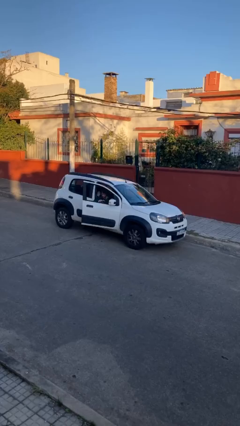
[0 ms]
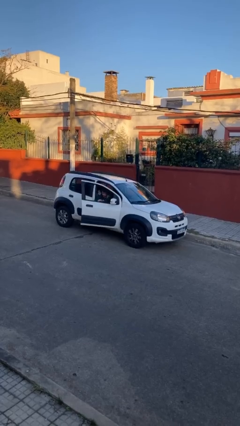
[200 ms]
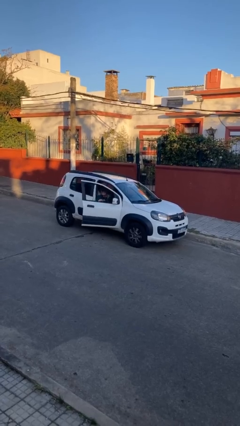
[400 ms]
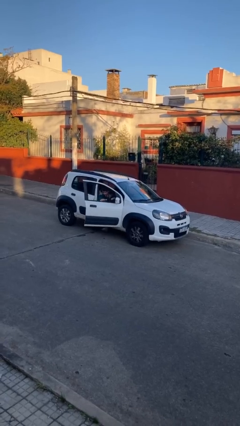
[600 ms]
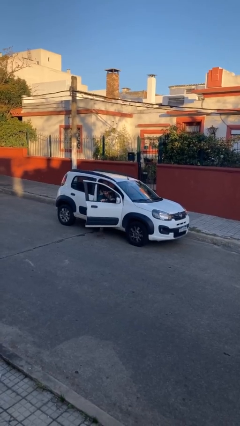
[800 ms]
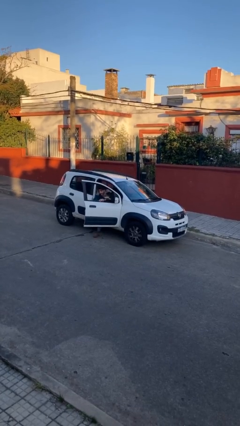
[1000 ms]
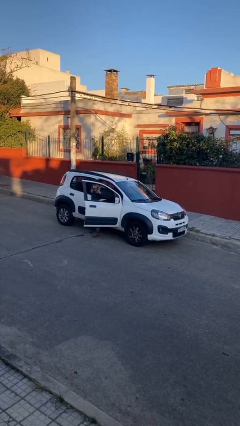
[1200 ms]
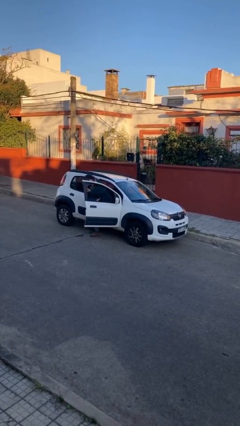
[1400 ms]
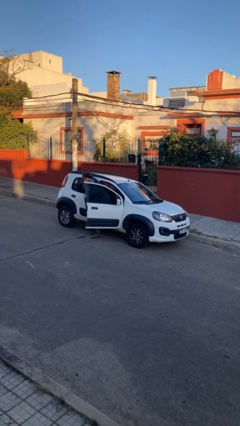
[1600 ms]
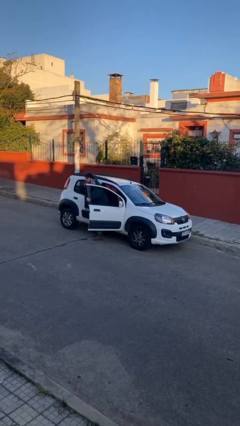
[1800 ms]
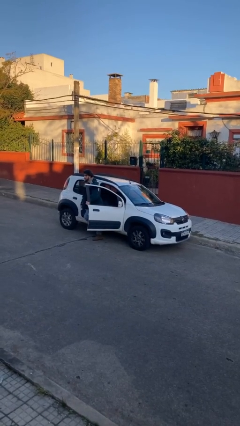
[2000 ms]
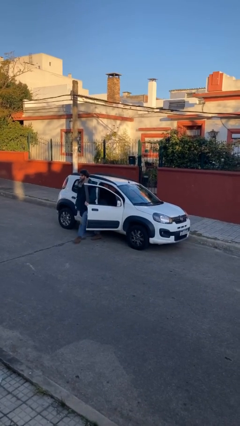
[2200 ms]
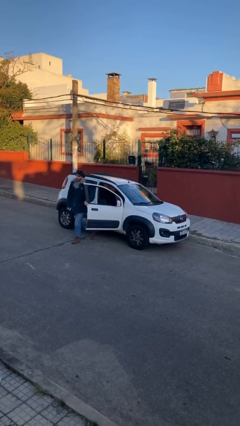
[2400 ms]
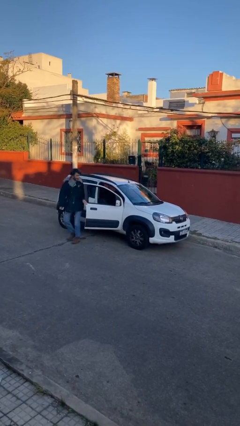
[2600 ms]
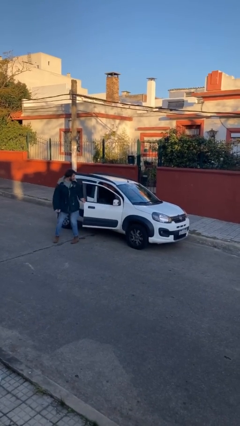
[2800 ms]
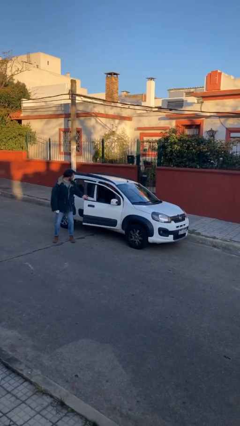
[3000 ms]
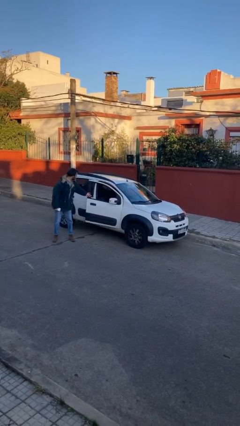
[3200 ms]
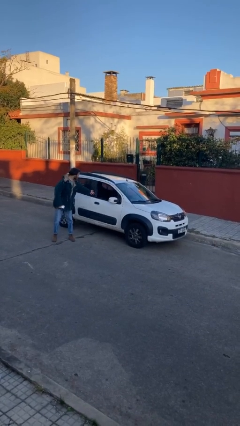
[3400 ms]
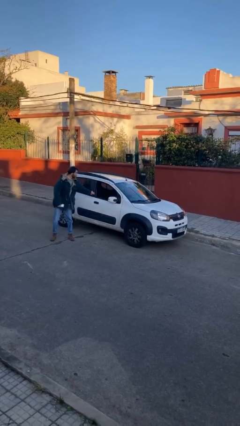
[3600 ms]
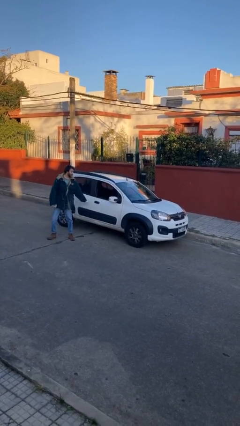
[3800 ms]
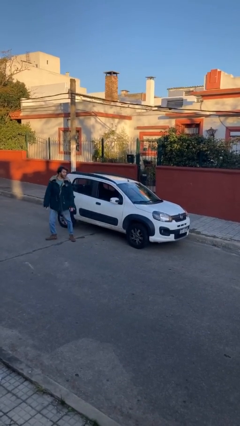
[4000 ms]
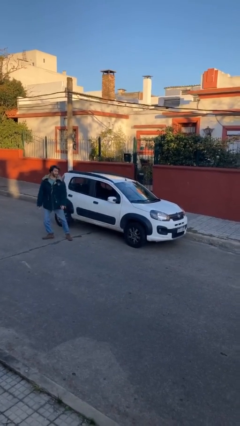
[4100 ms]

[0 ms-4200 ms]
car drops off person

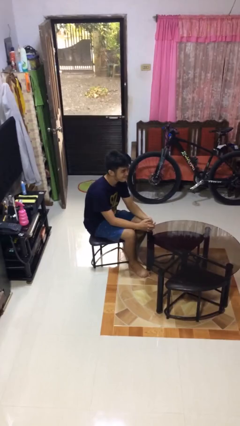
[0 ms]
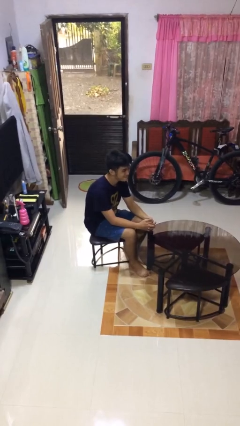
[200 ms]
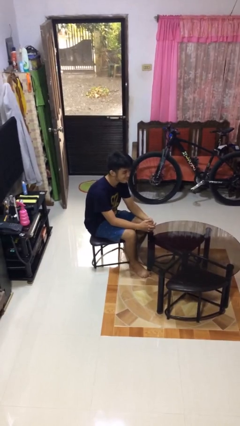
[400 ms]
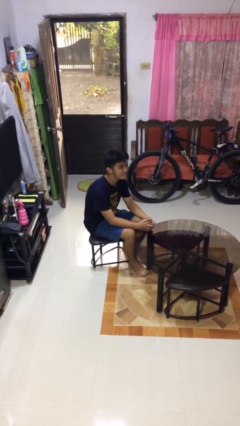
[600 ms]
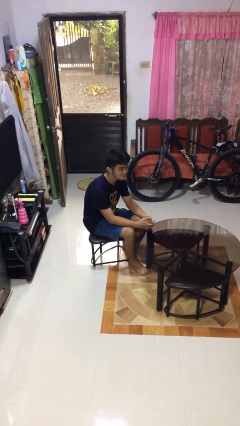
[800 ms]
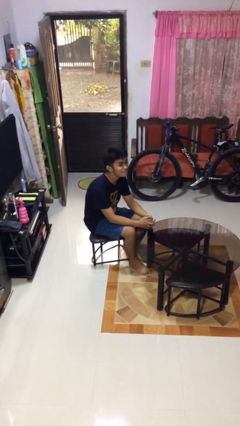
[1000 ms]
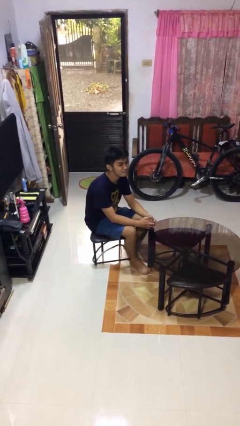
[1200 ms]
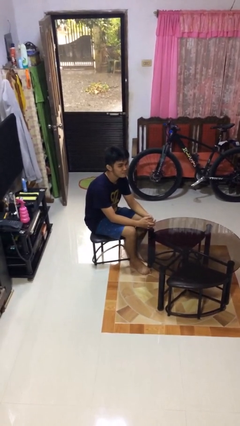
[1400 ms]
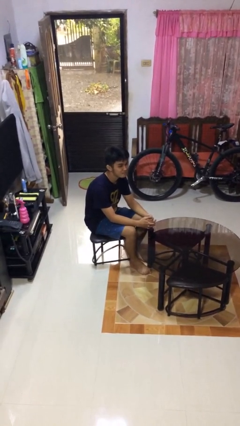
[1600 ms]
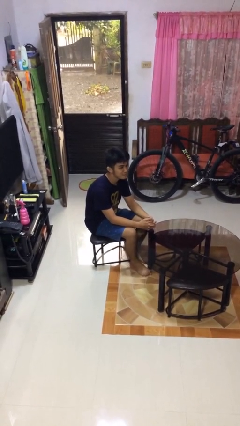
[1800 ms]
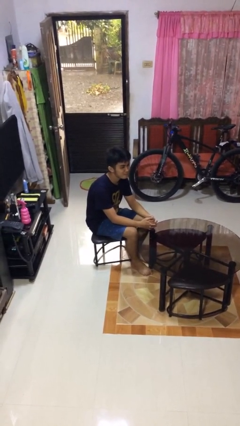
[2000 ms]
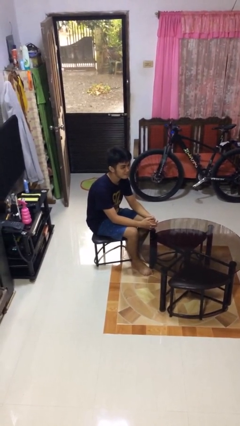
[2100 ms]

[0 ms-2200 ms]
person nods head

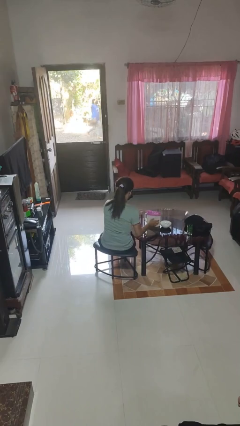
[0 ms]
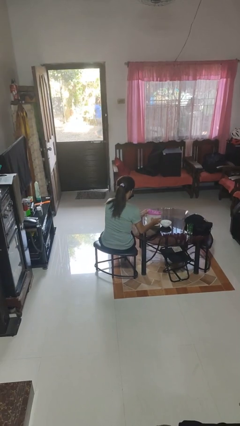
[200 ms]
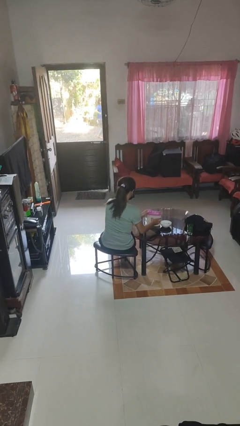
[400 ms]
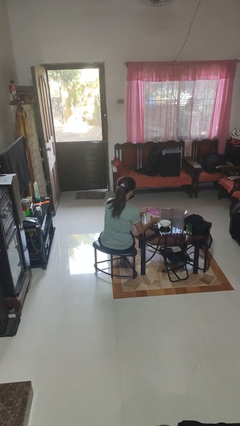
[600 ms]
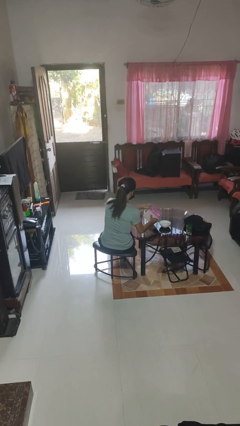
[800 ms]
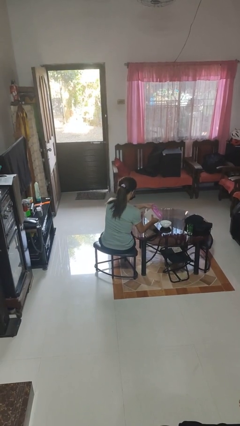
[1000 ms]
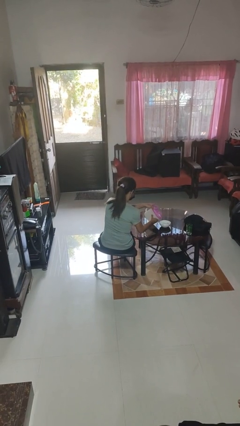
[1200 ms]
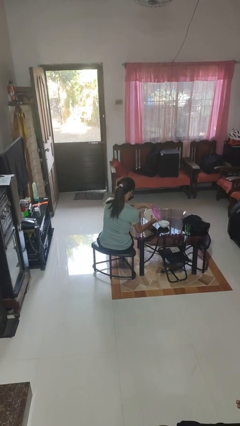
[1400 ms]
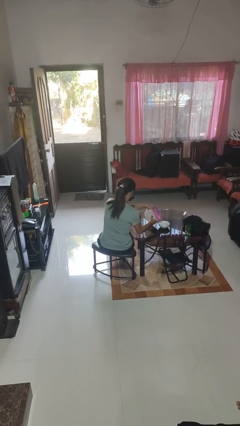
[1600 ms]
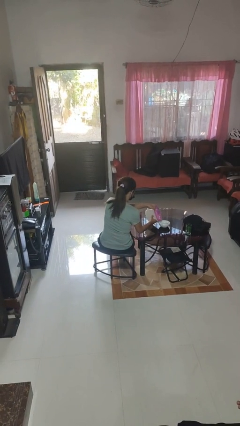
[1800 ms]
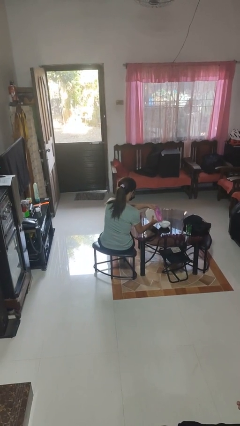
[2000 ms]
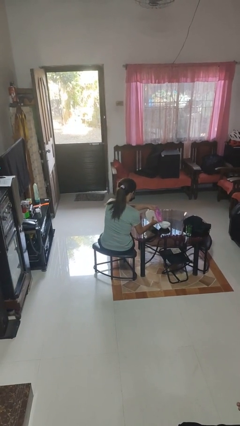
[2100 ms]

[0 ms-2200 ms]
person pours into bowl

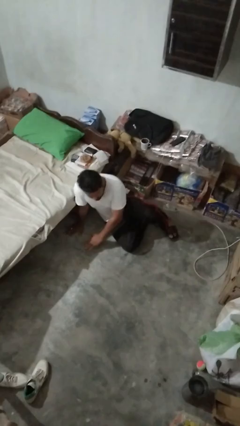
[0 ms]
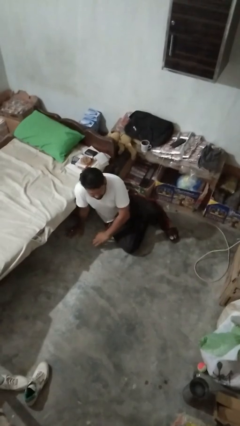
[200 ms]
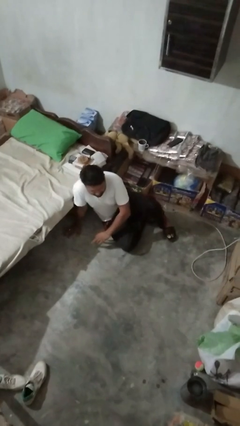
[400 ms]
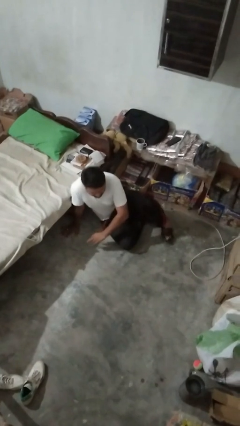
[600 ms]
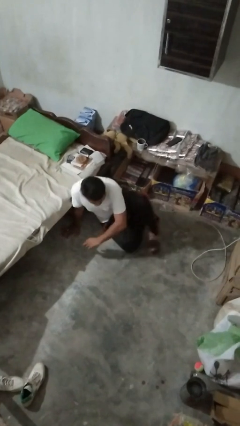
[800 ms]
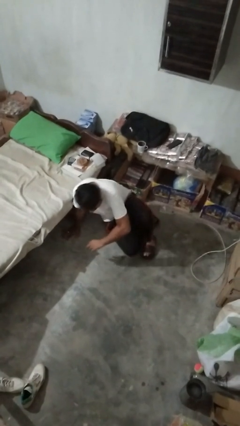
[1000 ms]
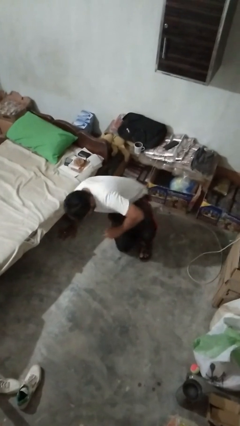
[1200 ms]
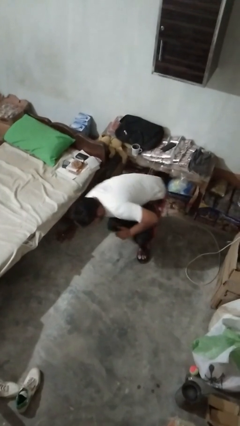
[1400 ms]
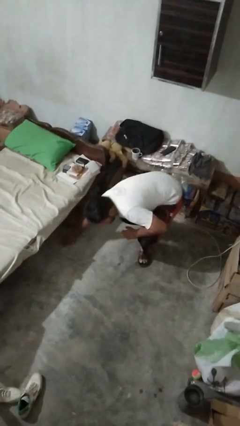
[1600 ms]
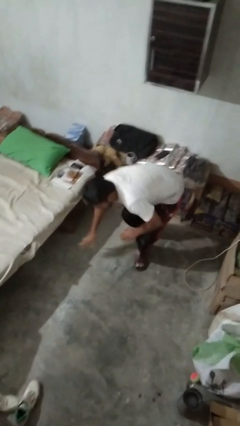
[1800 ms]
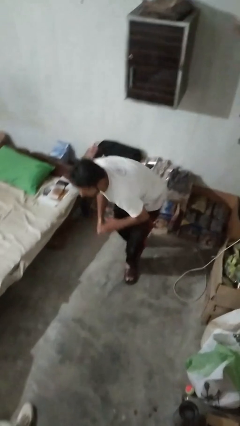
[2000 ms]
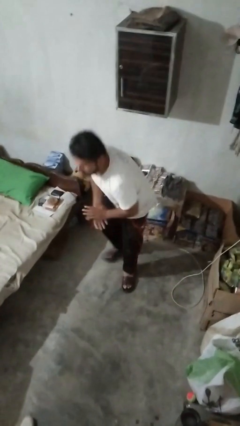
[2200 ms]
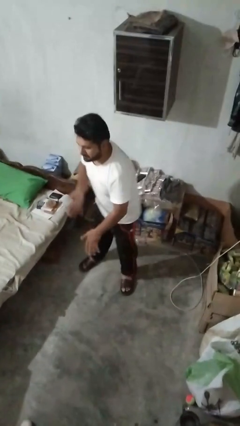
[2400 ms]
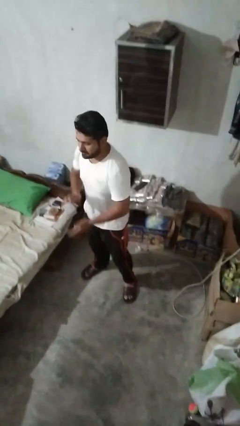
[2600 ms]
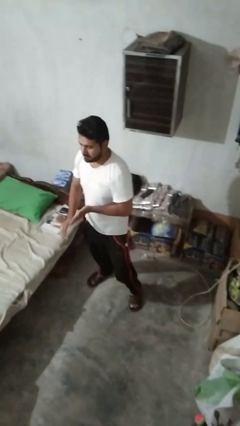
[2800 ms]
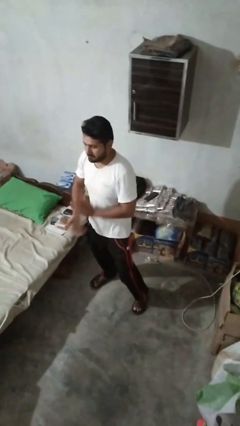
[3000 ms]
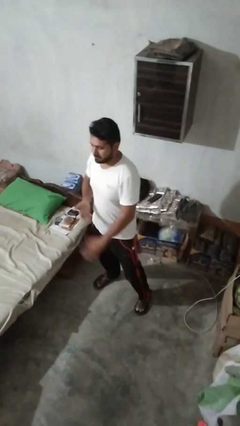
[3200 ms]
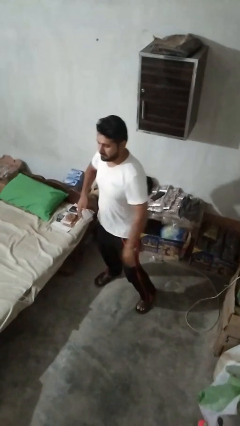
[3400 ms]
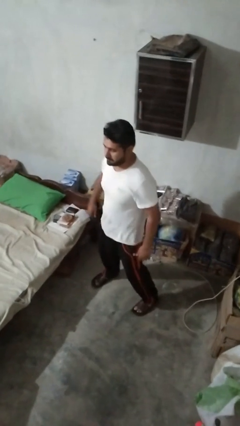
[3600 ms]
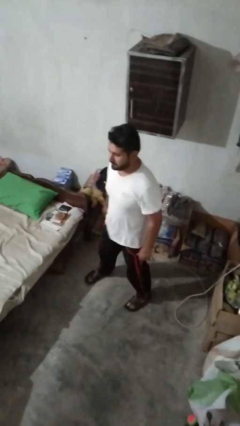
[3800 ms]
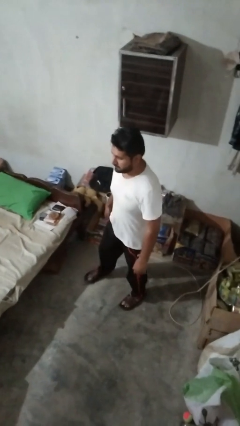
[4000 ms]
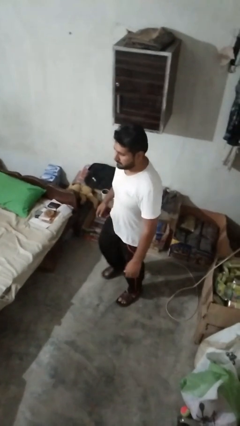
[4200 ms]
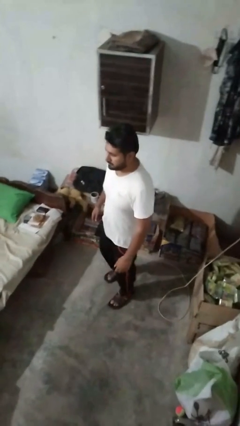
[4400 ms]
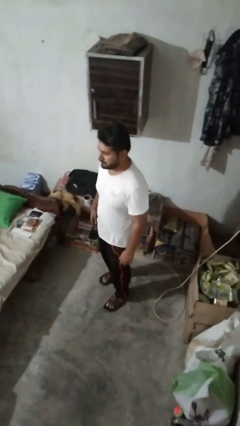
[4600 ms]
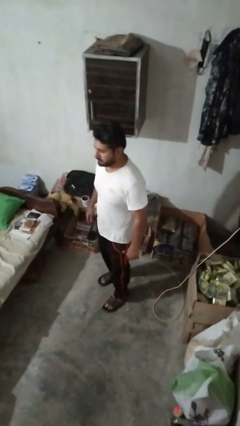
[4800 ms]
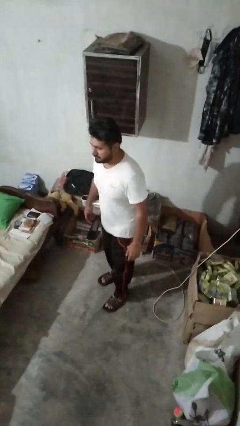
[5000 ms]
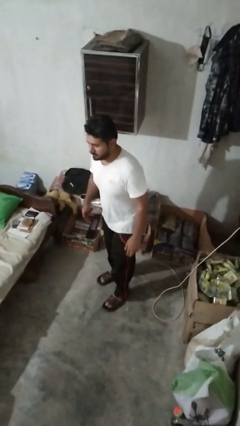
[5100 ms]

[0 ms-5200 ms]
person stands up from floor

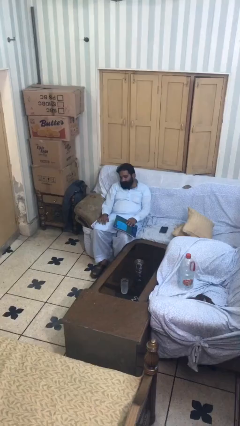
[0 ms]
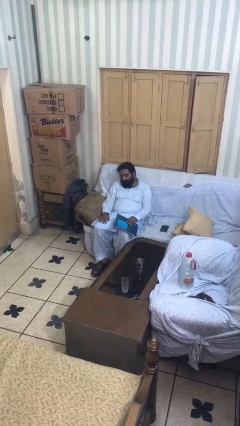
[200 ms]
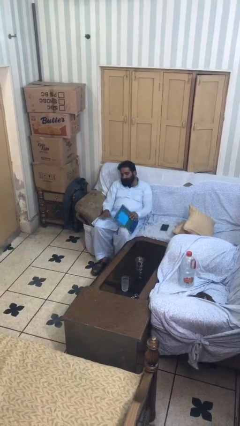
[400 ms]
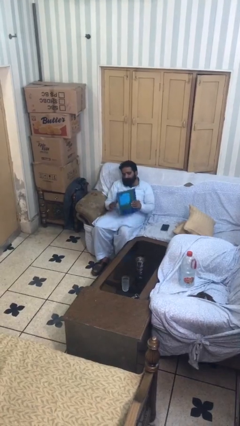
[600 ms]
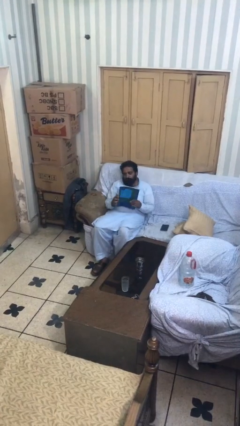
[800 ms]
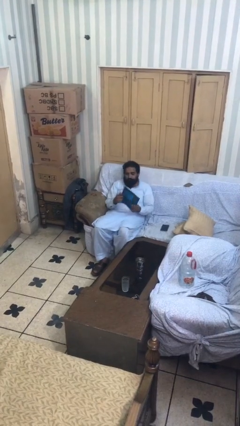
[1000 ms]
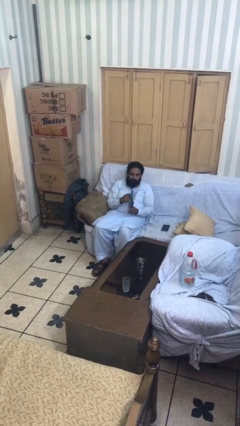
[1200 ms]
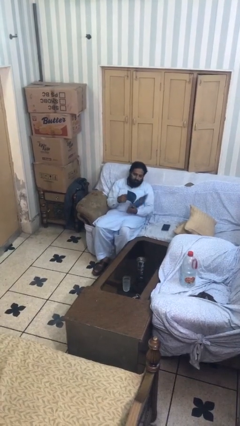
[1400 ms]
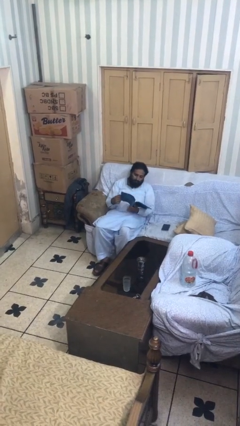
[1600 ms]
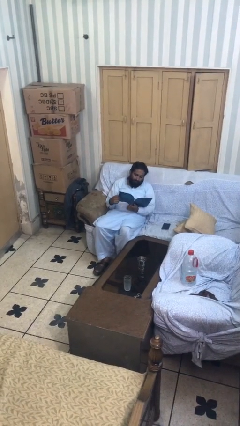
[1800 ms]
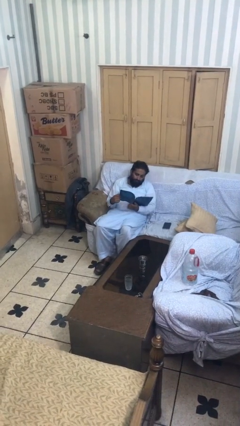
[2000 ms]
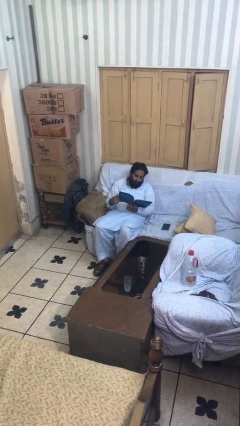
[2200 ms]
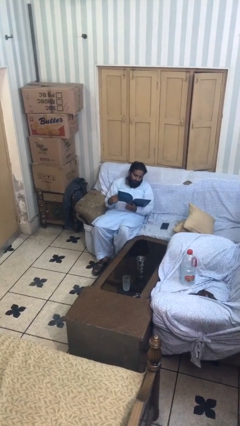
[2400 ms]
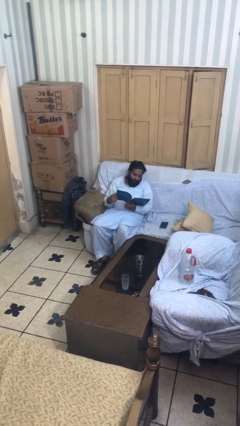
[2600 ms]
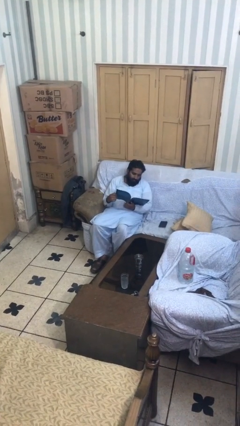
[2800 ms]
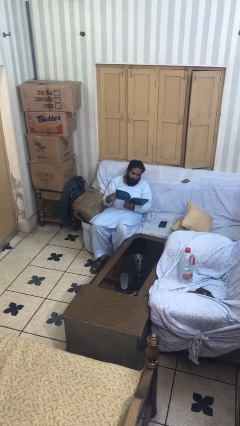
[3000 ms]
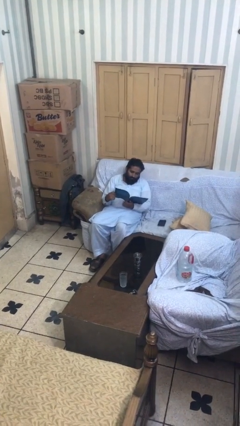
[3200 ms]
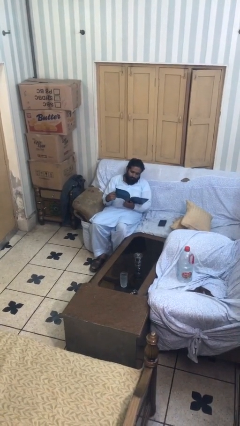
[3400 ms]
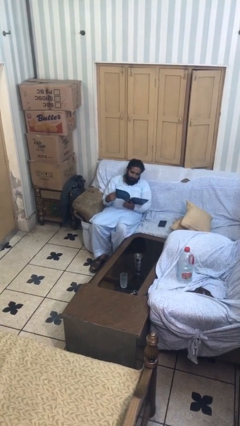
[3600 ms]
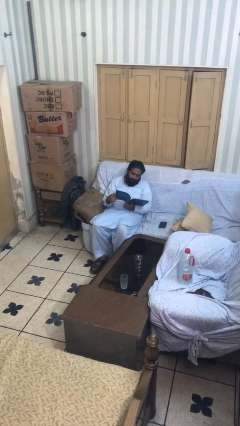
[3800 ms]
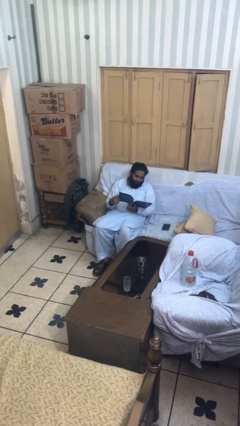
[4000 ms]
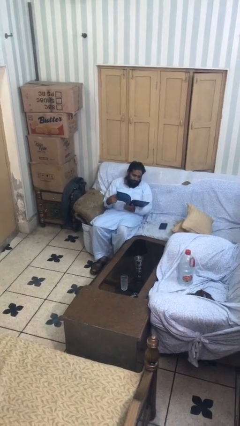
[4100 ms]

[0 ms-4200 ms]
person reads document
